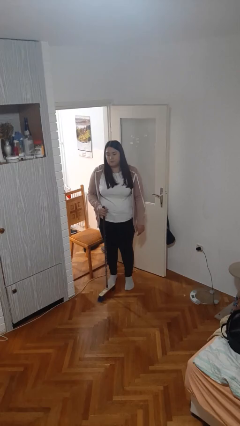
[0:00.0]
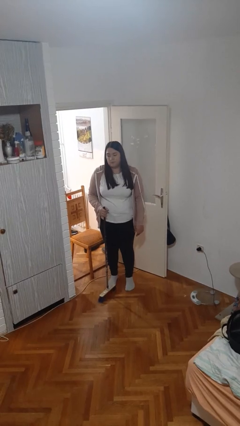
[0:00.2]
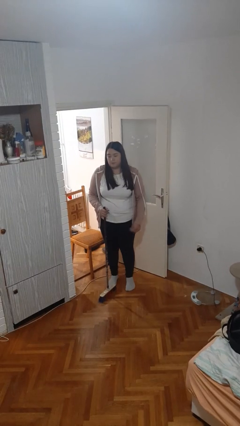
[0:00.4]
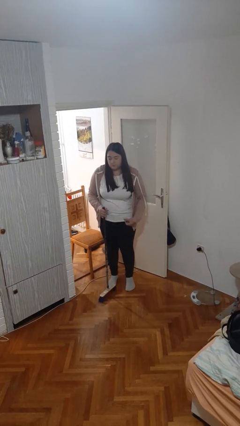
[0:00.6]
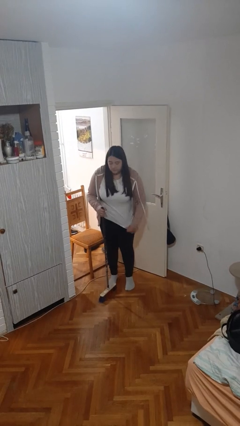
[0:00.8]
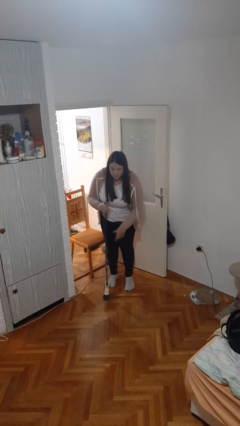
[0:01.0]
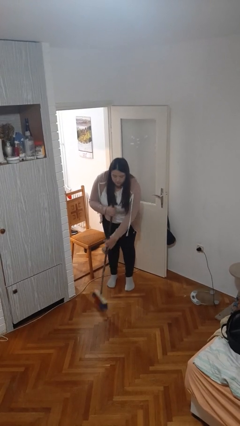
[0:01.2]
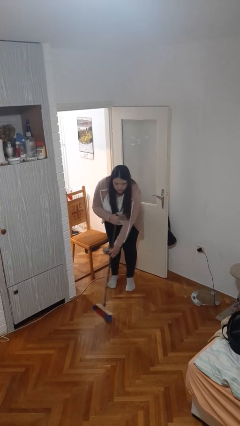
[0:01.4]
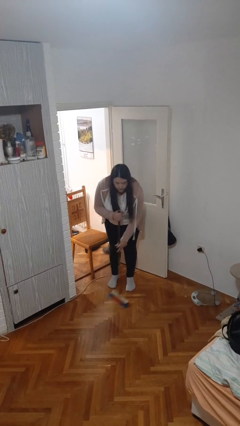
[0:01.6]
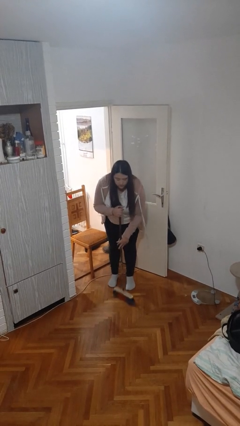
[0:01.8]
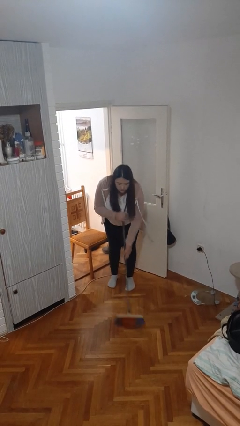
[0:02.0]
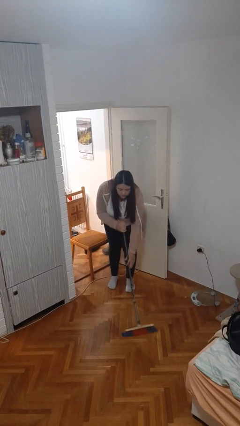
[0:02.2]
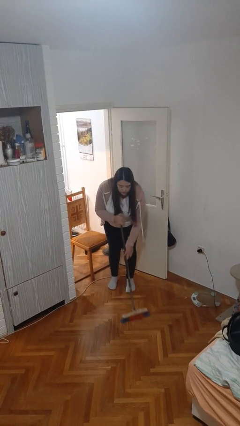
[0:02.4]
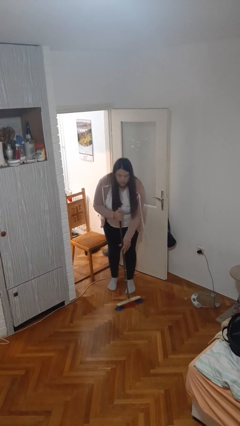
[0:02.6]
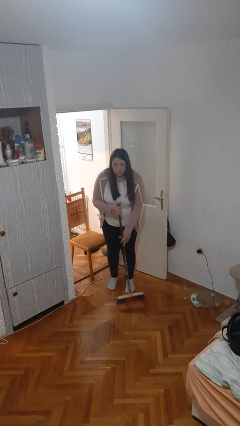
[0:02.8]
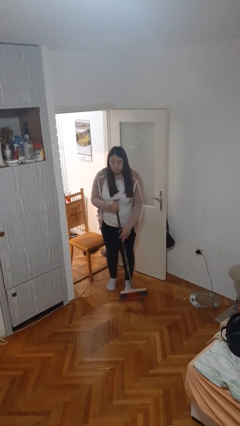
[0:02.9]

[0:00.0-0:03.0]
person sweeps floor

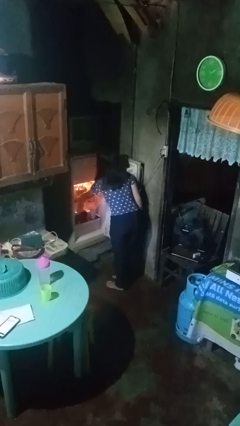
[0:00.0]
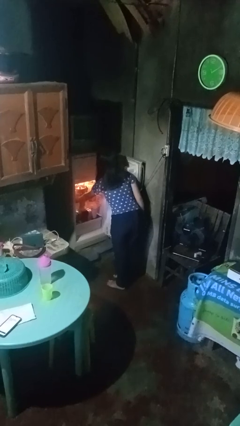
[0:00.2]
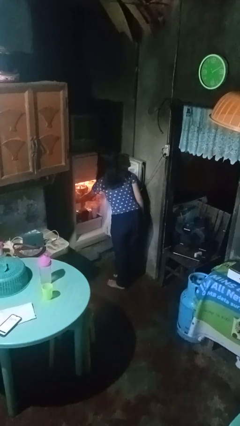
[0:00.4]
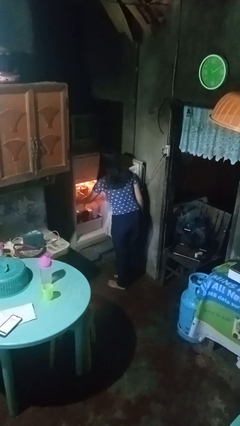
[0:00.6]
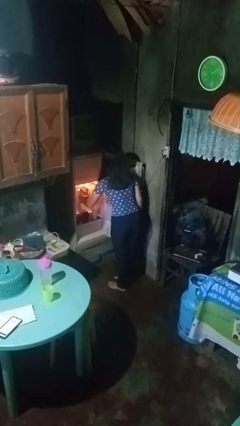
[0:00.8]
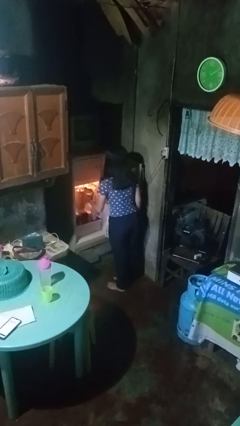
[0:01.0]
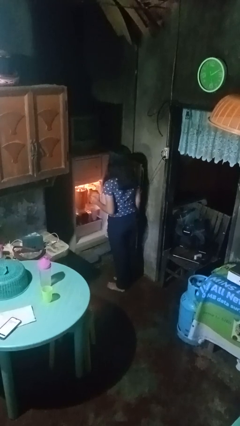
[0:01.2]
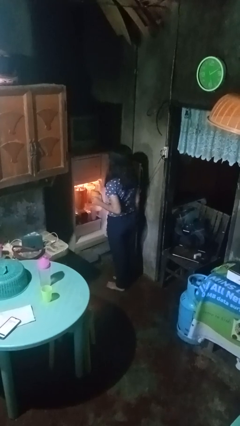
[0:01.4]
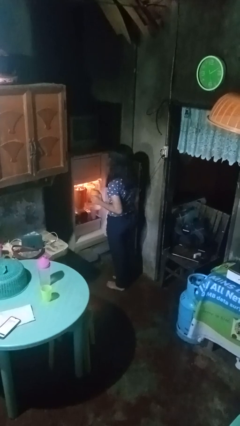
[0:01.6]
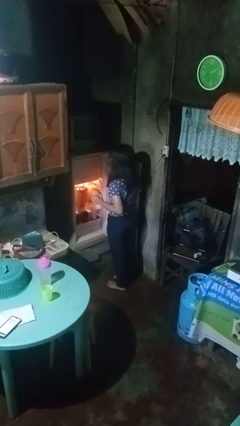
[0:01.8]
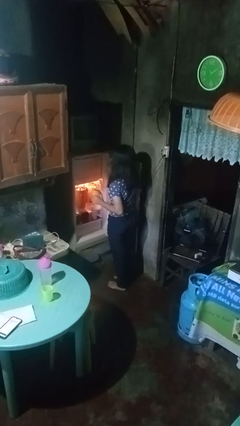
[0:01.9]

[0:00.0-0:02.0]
person takes object from refrigerator

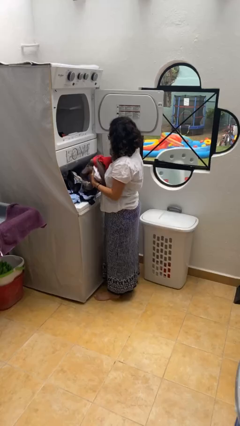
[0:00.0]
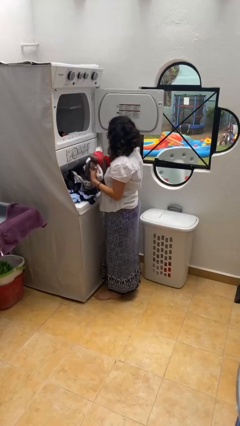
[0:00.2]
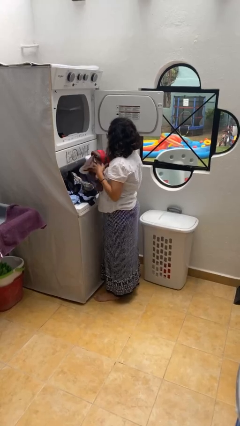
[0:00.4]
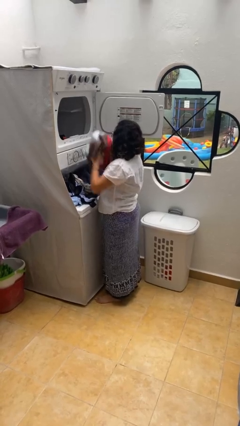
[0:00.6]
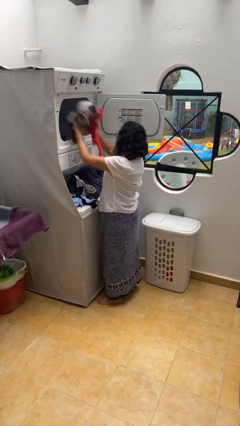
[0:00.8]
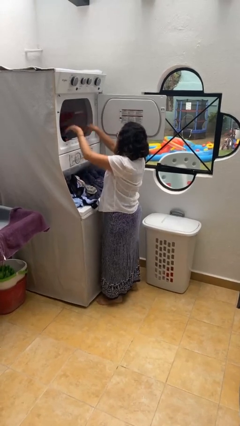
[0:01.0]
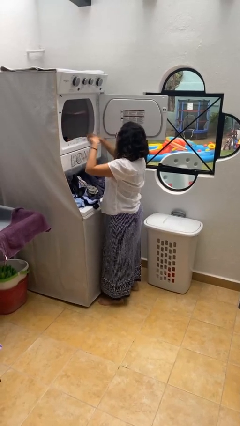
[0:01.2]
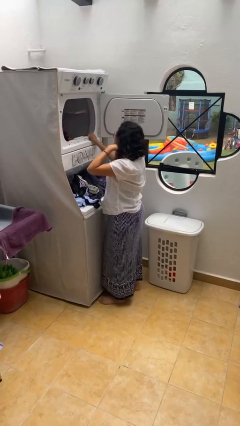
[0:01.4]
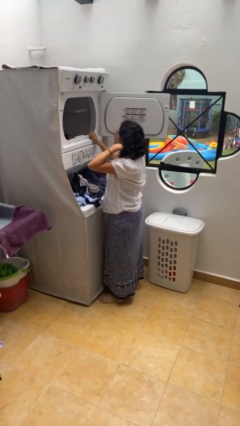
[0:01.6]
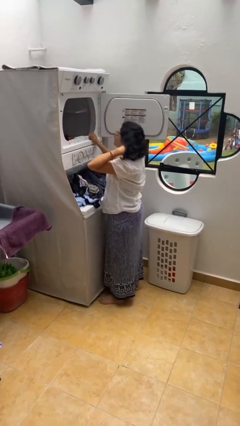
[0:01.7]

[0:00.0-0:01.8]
person loads dryer

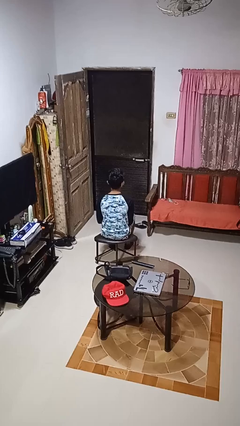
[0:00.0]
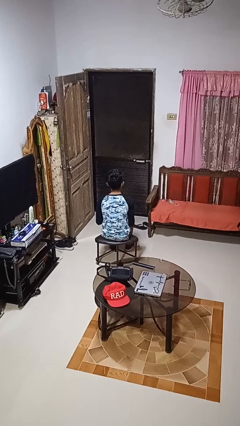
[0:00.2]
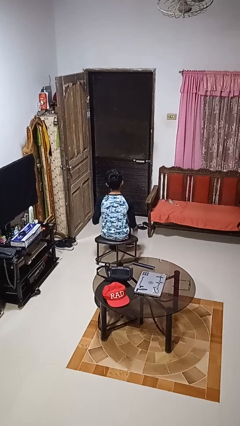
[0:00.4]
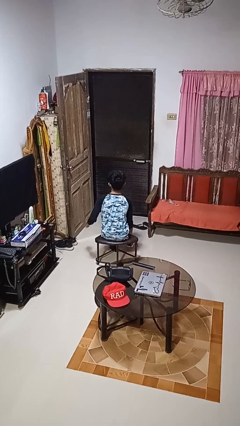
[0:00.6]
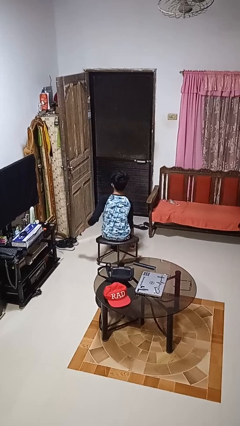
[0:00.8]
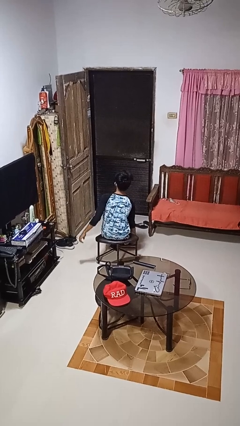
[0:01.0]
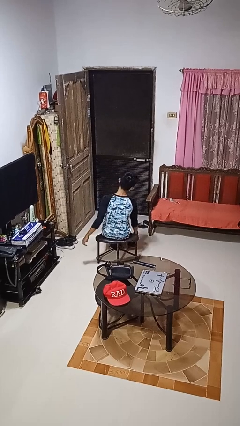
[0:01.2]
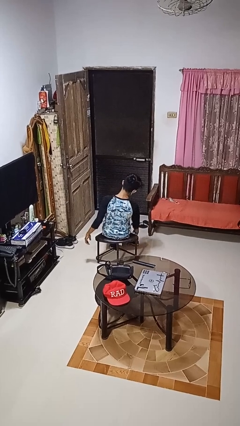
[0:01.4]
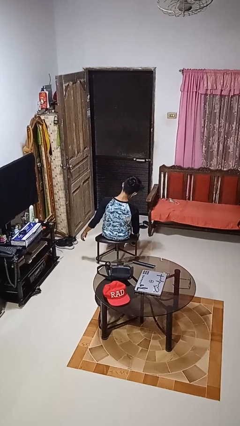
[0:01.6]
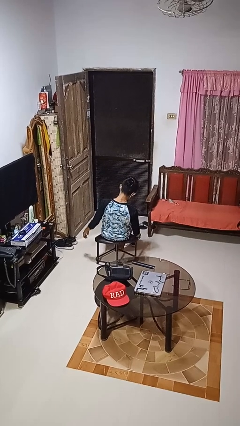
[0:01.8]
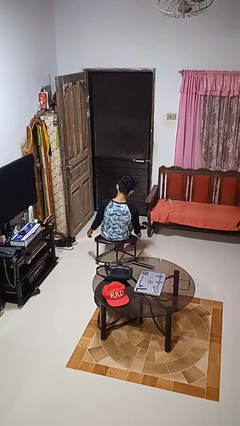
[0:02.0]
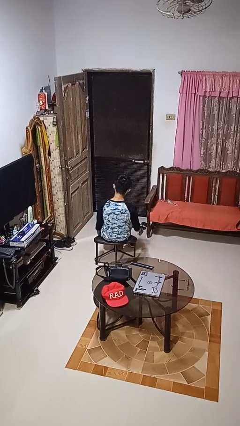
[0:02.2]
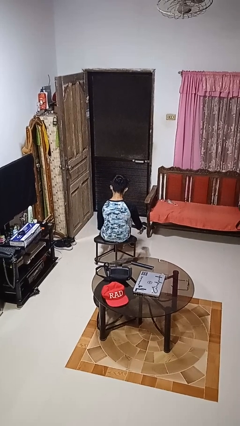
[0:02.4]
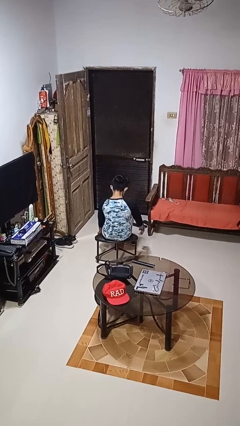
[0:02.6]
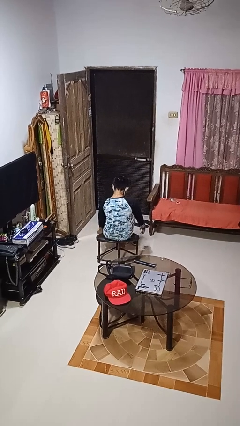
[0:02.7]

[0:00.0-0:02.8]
person takes off shoes

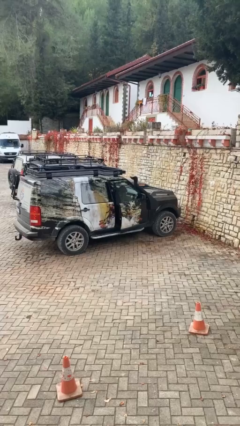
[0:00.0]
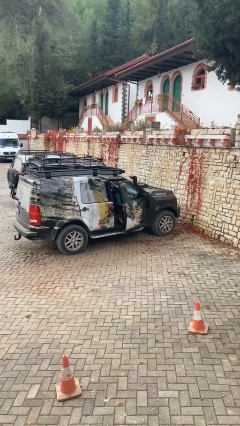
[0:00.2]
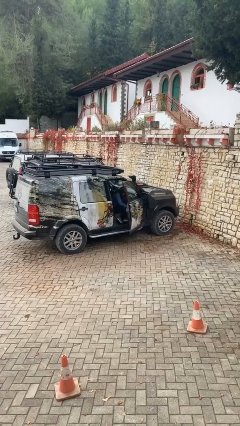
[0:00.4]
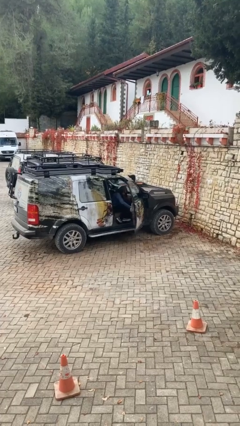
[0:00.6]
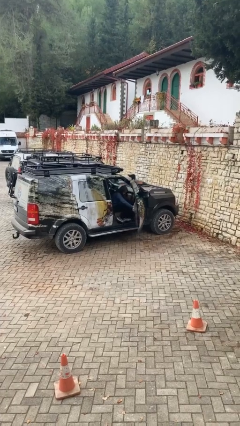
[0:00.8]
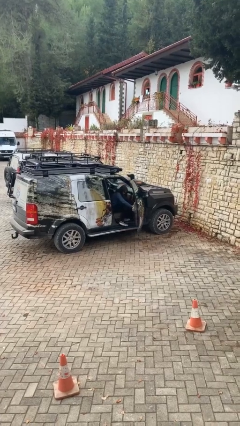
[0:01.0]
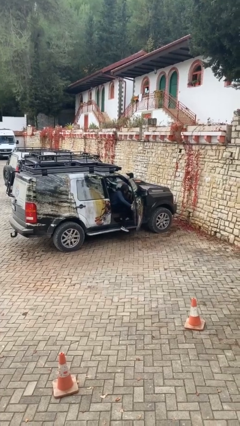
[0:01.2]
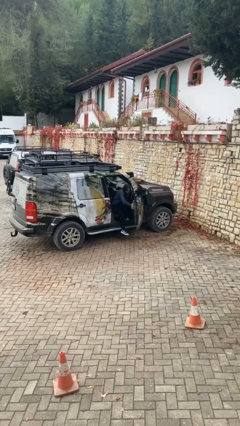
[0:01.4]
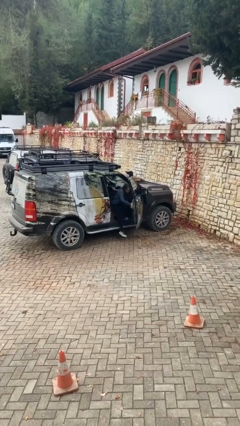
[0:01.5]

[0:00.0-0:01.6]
person opens car door

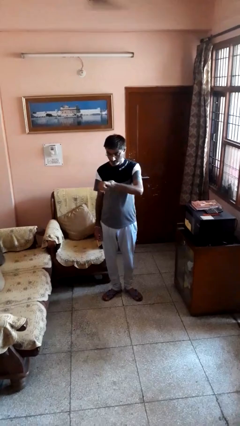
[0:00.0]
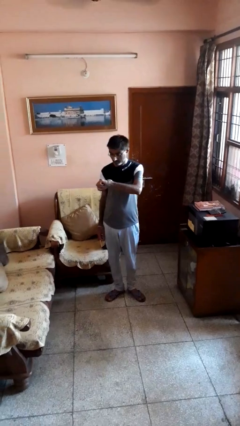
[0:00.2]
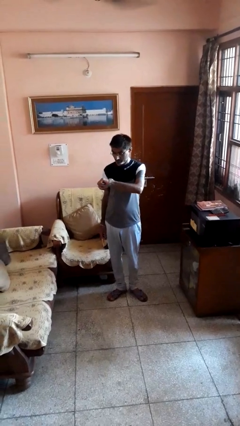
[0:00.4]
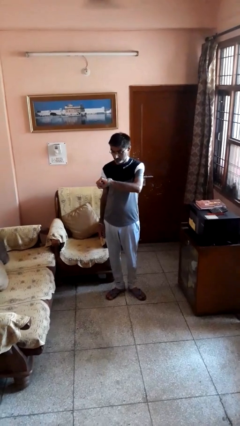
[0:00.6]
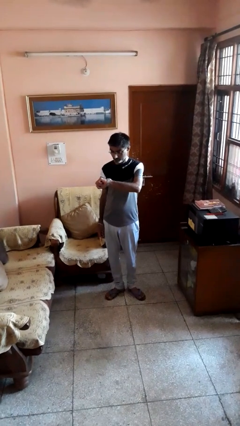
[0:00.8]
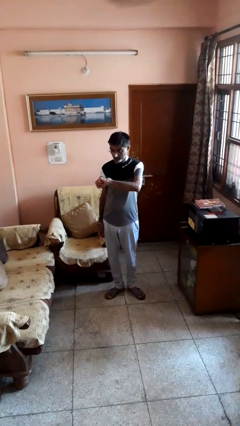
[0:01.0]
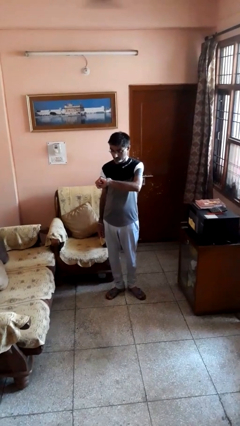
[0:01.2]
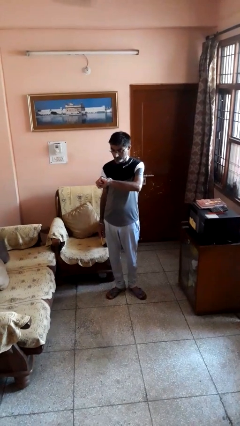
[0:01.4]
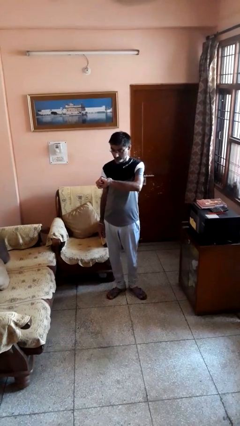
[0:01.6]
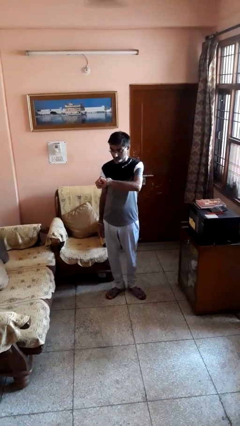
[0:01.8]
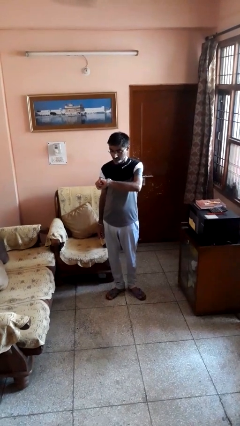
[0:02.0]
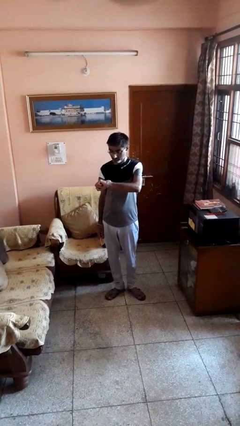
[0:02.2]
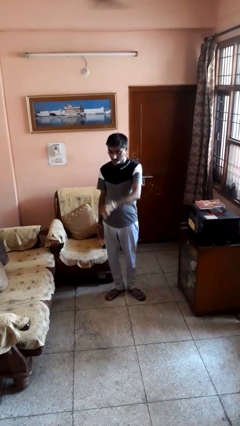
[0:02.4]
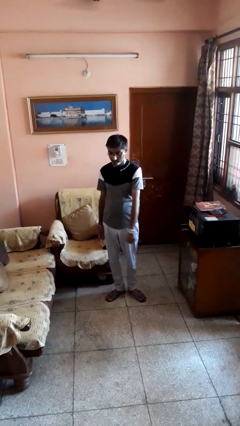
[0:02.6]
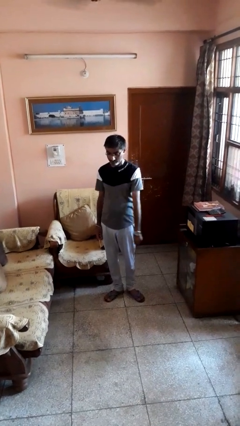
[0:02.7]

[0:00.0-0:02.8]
person looks at wristwatch

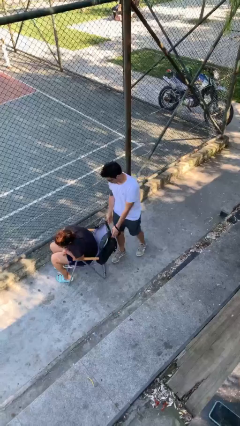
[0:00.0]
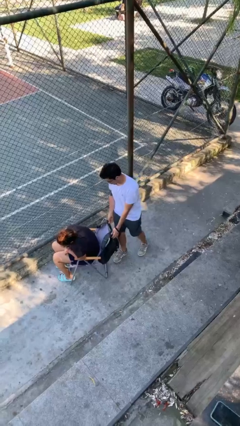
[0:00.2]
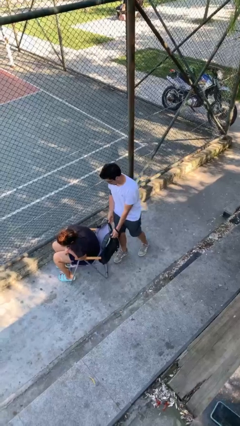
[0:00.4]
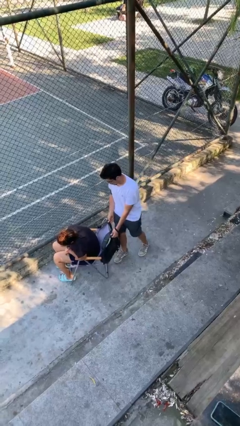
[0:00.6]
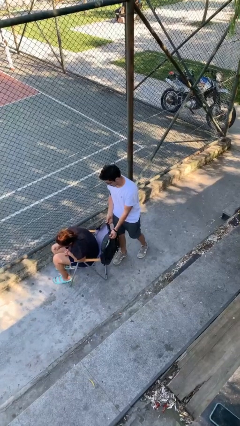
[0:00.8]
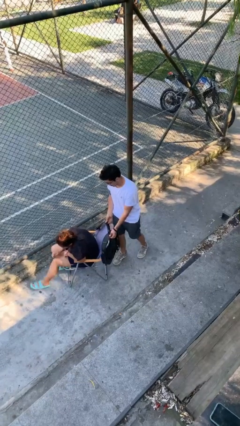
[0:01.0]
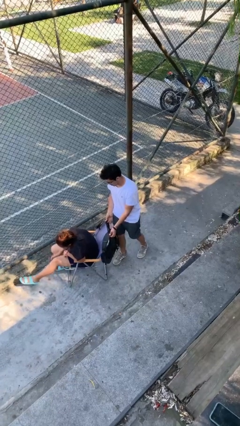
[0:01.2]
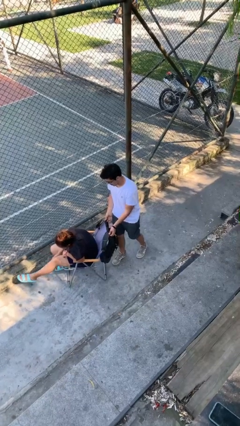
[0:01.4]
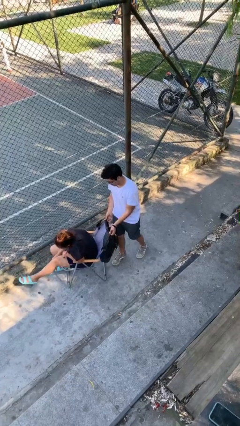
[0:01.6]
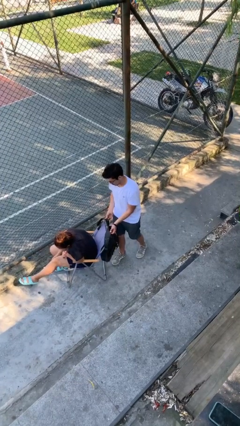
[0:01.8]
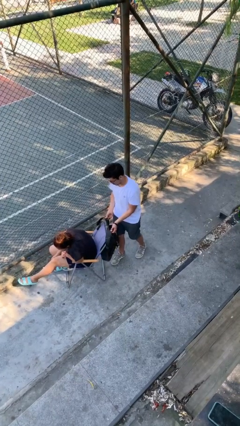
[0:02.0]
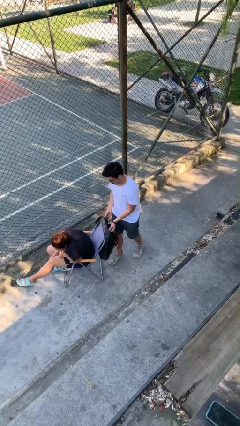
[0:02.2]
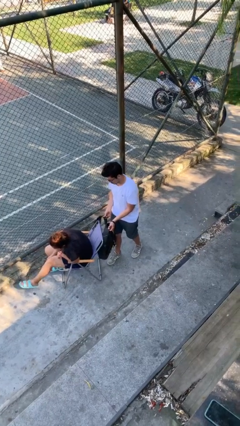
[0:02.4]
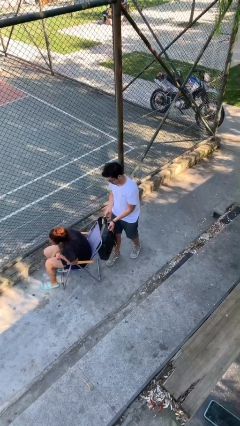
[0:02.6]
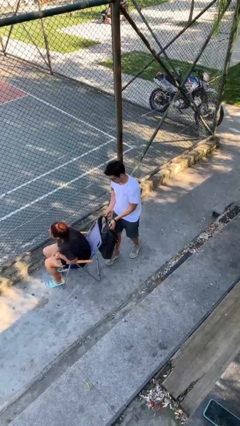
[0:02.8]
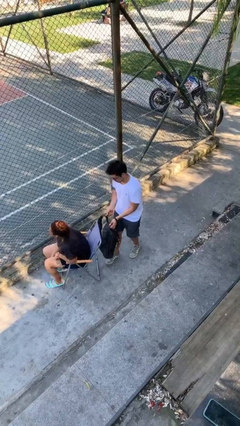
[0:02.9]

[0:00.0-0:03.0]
person steals object from person

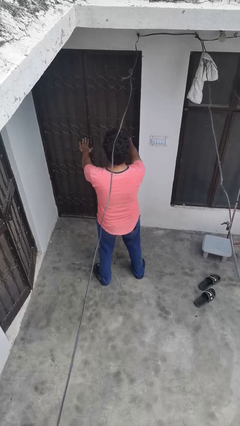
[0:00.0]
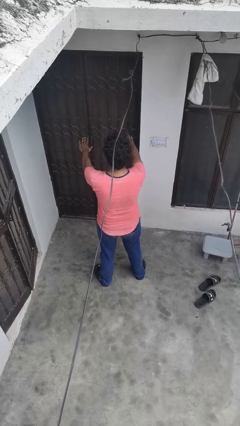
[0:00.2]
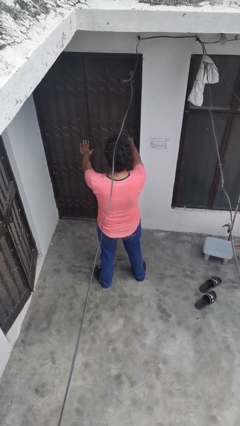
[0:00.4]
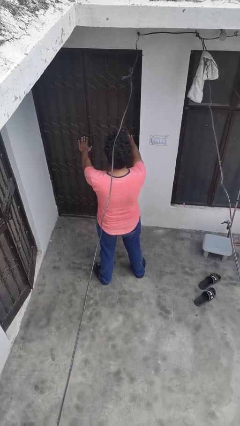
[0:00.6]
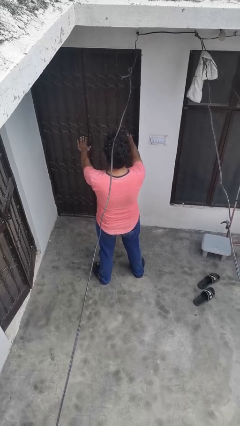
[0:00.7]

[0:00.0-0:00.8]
person stands up
